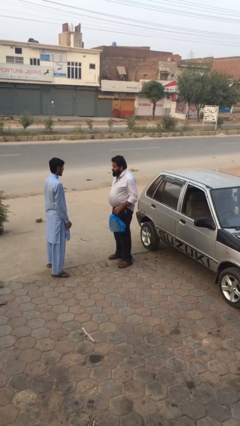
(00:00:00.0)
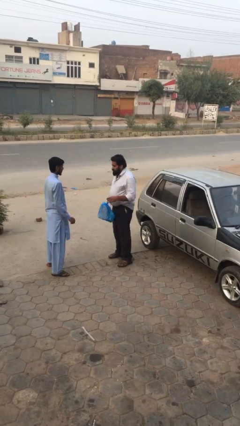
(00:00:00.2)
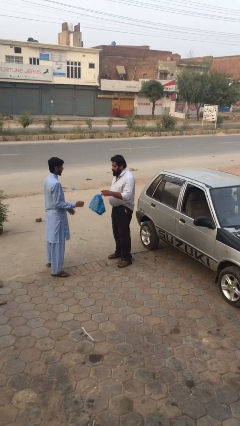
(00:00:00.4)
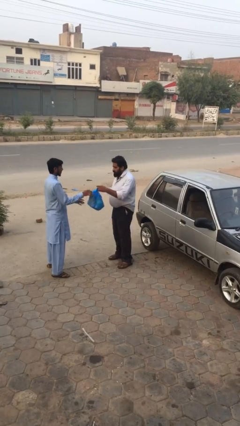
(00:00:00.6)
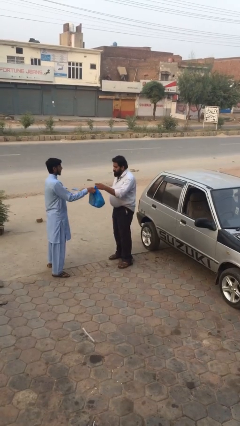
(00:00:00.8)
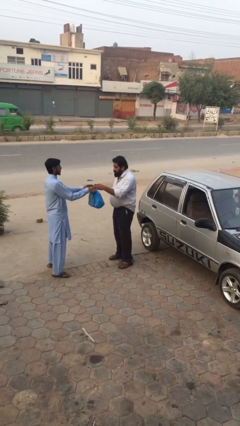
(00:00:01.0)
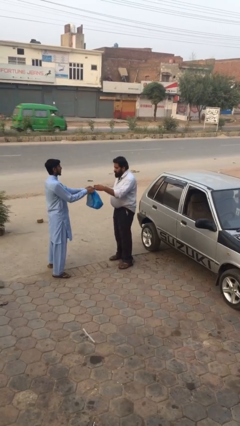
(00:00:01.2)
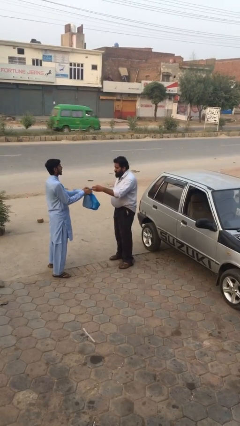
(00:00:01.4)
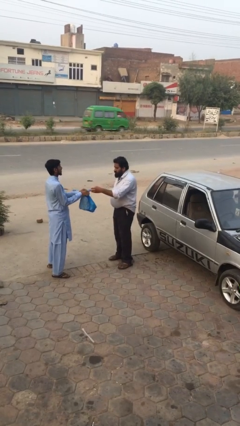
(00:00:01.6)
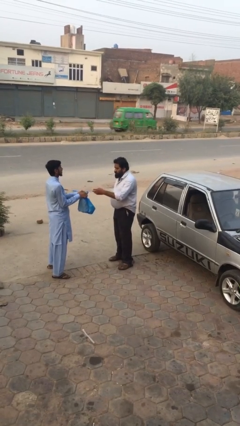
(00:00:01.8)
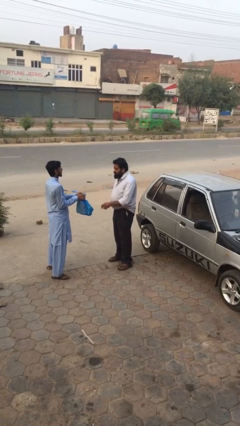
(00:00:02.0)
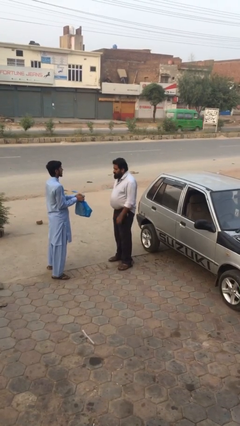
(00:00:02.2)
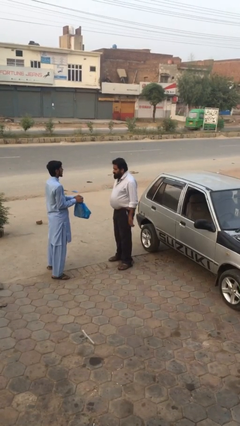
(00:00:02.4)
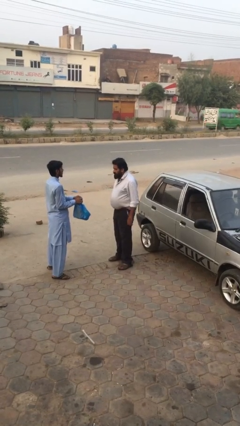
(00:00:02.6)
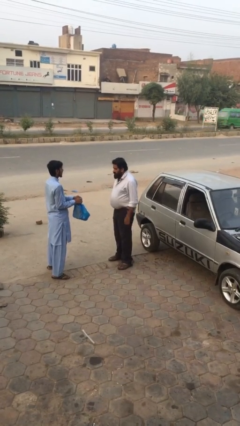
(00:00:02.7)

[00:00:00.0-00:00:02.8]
person transfers object to person

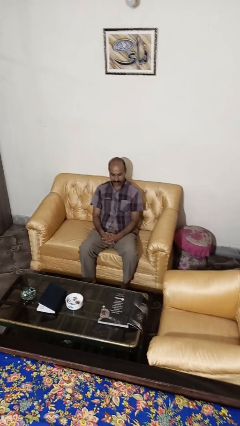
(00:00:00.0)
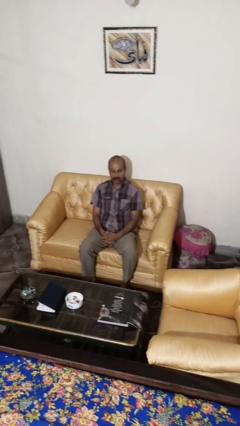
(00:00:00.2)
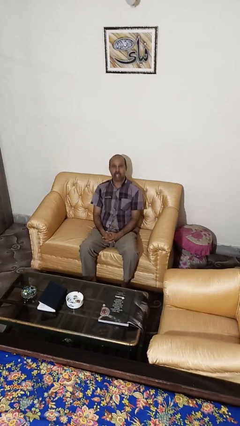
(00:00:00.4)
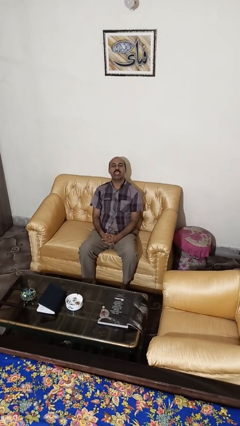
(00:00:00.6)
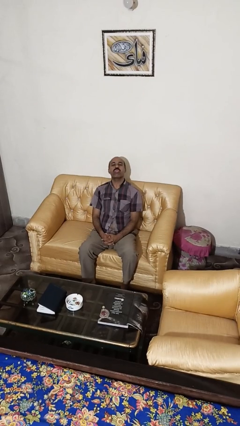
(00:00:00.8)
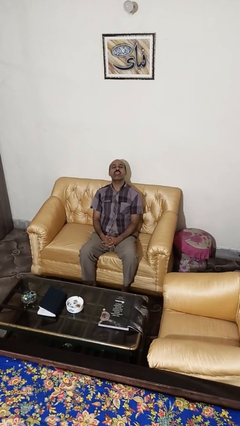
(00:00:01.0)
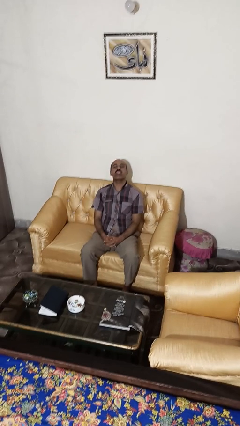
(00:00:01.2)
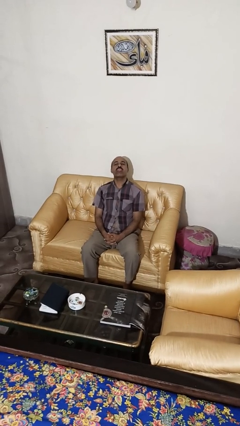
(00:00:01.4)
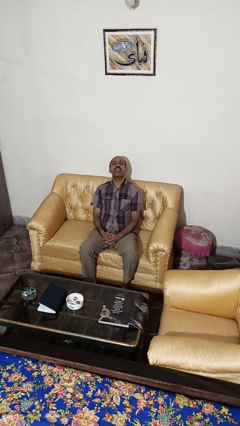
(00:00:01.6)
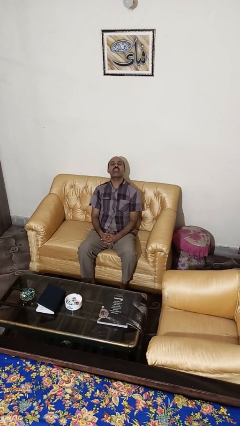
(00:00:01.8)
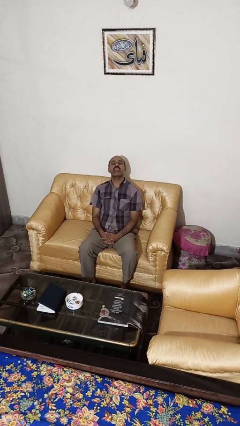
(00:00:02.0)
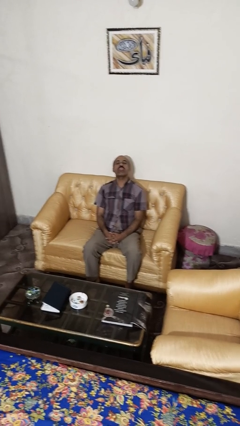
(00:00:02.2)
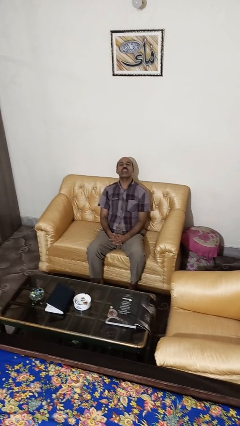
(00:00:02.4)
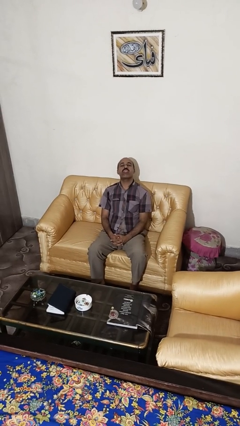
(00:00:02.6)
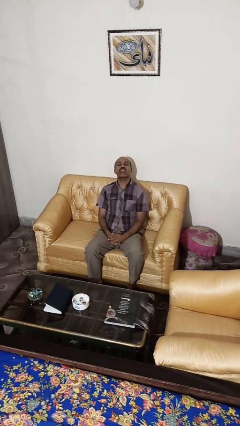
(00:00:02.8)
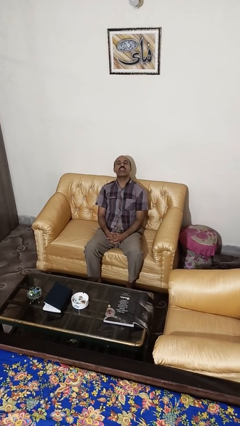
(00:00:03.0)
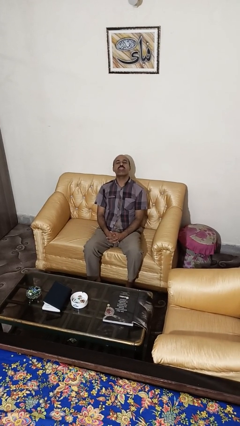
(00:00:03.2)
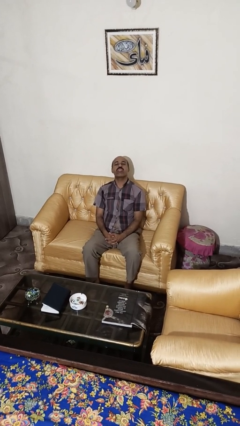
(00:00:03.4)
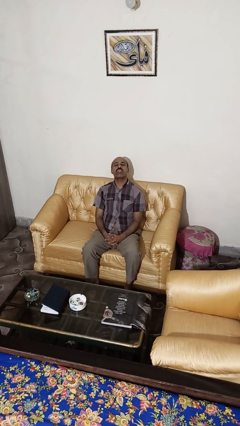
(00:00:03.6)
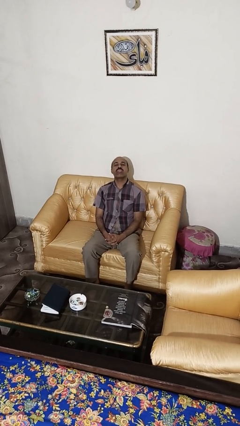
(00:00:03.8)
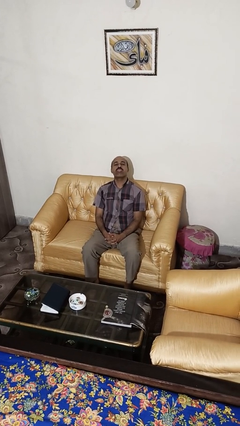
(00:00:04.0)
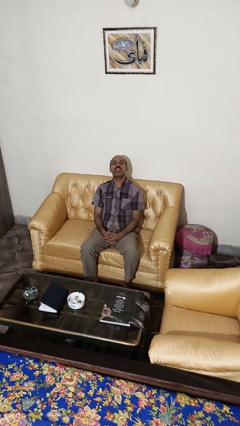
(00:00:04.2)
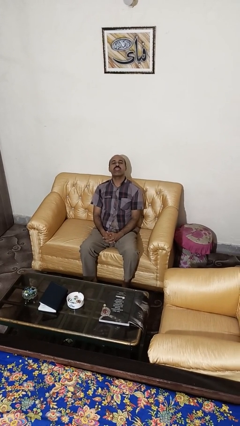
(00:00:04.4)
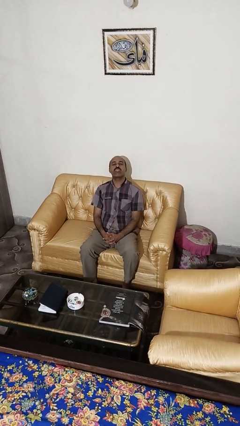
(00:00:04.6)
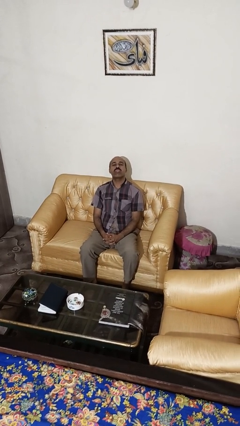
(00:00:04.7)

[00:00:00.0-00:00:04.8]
person sticks out tongue

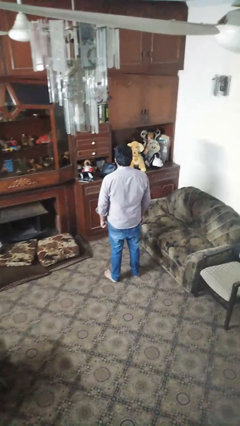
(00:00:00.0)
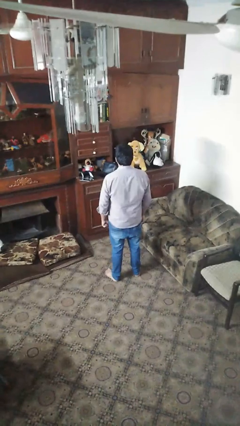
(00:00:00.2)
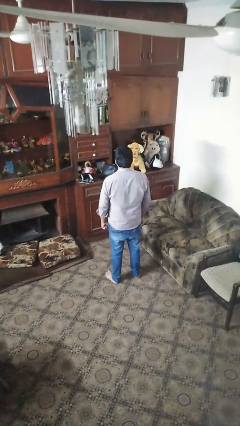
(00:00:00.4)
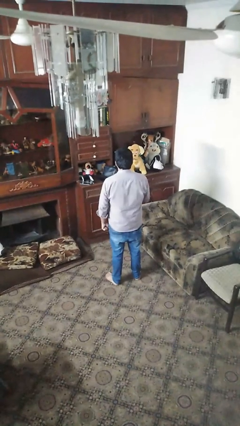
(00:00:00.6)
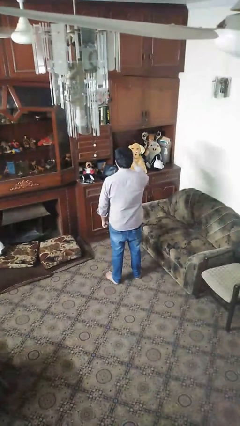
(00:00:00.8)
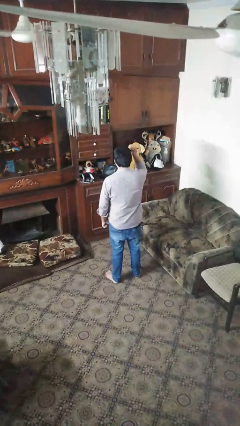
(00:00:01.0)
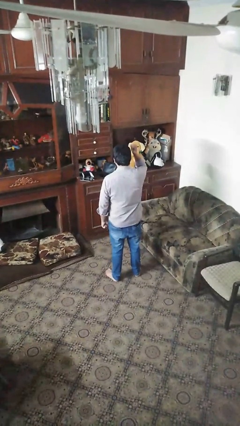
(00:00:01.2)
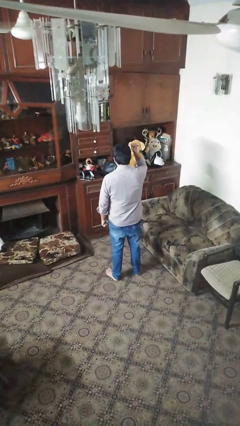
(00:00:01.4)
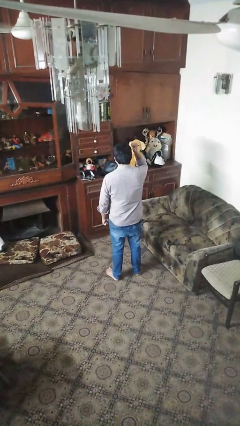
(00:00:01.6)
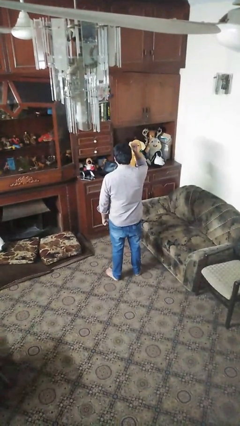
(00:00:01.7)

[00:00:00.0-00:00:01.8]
person gestures behind me

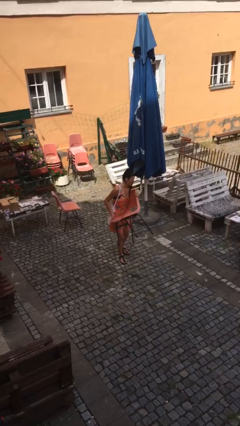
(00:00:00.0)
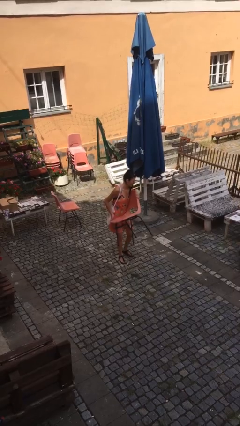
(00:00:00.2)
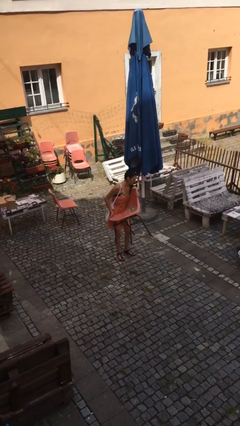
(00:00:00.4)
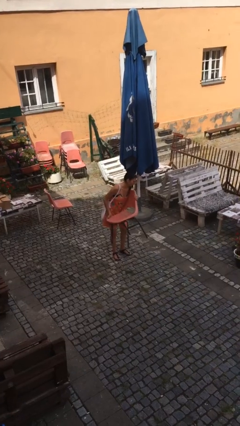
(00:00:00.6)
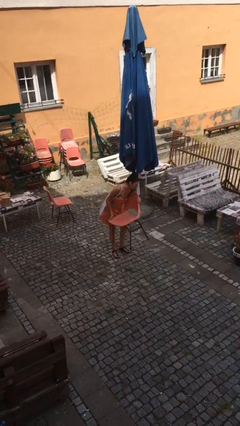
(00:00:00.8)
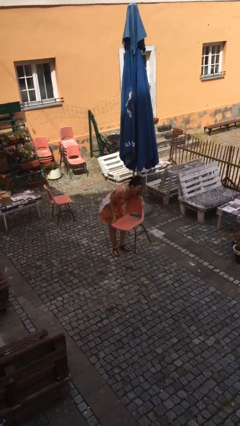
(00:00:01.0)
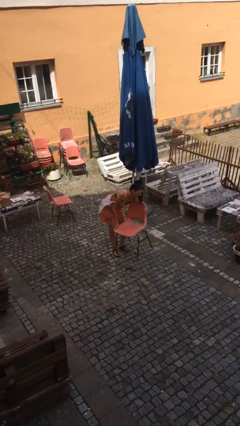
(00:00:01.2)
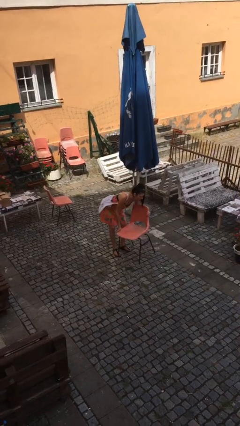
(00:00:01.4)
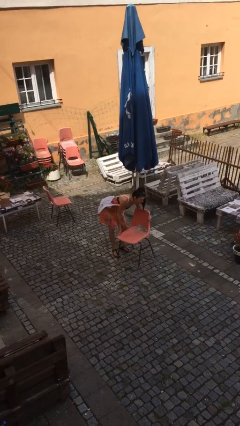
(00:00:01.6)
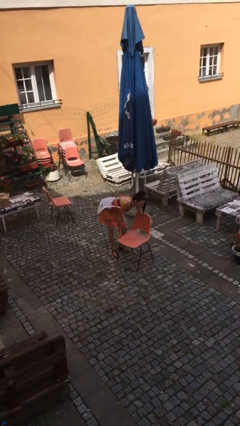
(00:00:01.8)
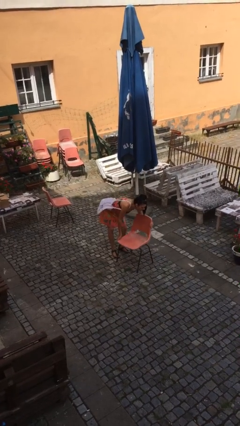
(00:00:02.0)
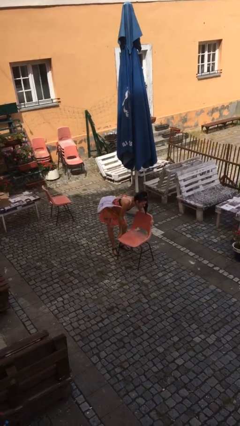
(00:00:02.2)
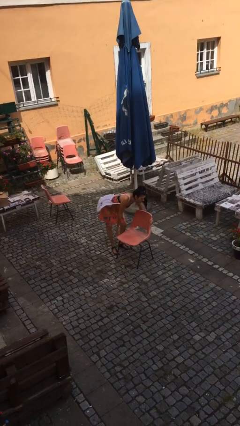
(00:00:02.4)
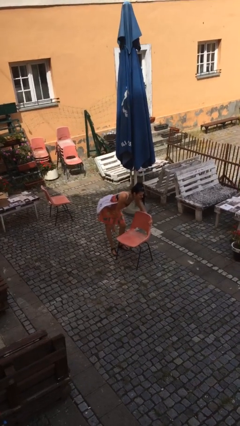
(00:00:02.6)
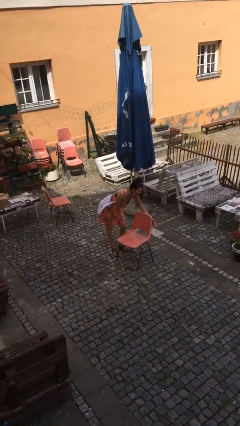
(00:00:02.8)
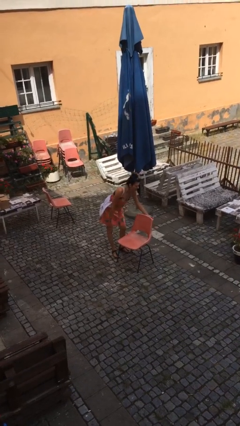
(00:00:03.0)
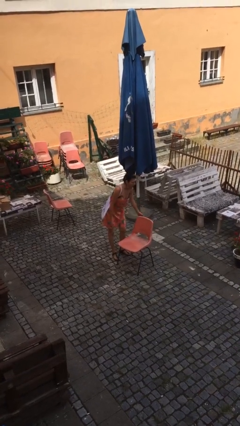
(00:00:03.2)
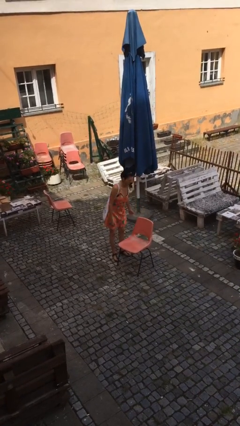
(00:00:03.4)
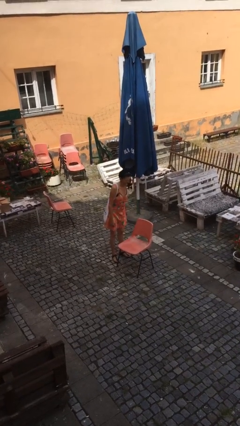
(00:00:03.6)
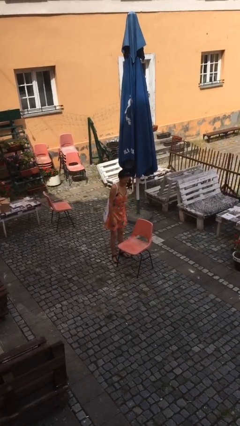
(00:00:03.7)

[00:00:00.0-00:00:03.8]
person puts down object on floor

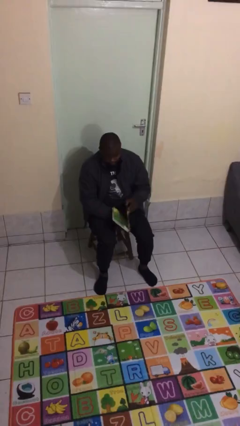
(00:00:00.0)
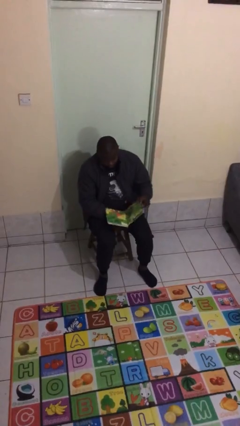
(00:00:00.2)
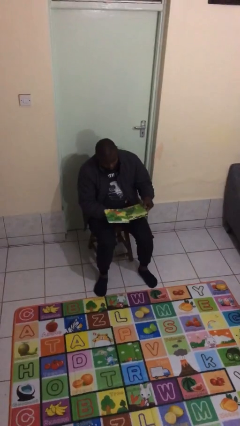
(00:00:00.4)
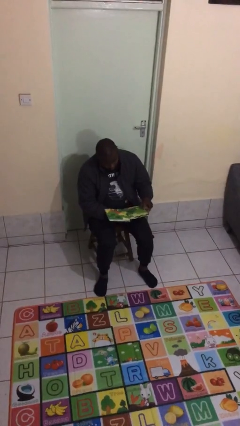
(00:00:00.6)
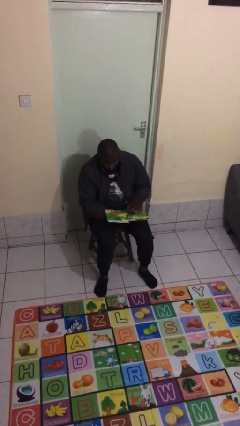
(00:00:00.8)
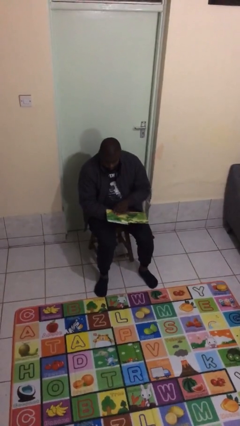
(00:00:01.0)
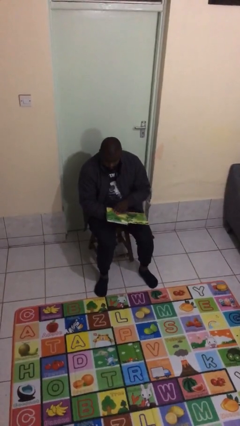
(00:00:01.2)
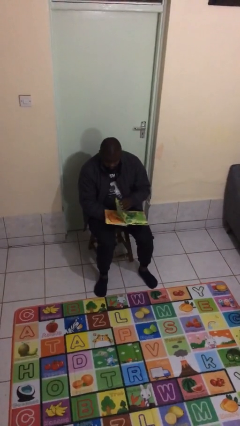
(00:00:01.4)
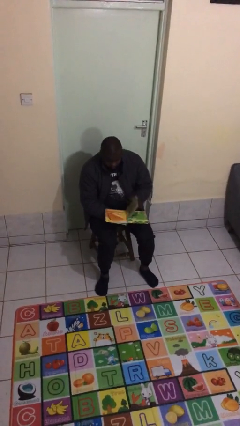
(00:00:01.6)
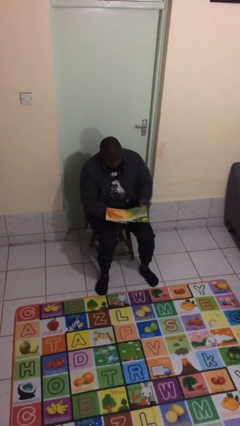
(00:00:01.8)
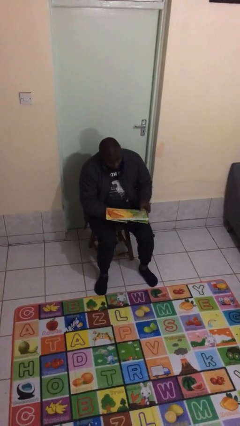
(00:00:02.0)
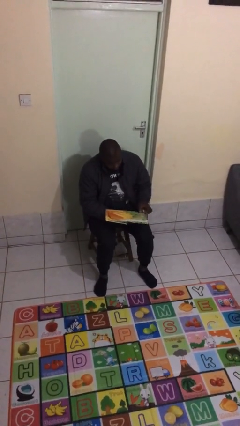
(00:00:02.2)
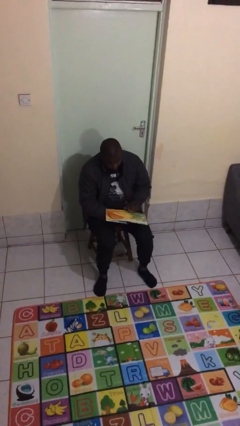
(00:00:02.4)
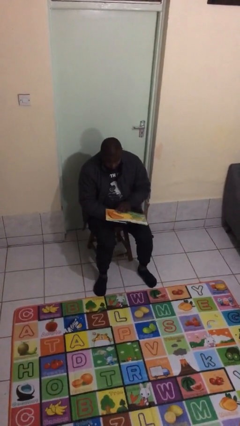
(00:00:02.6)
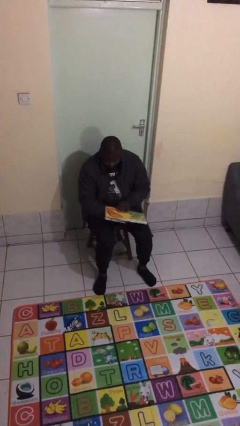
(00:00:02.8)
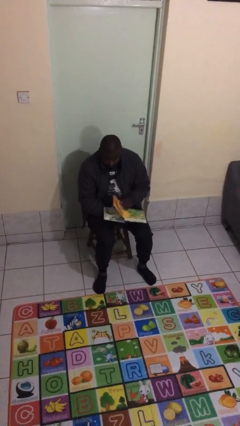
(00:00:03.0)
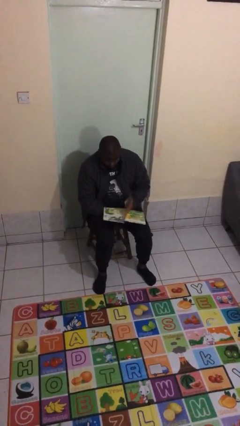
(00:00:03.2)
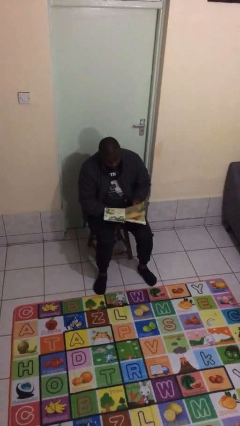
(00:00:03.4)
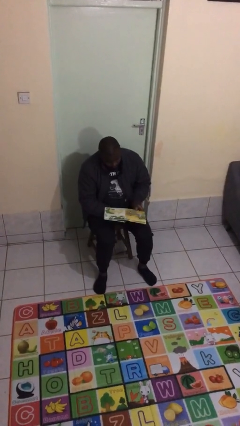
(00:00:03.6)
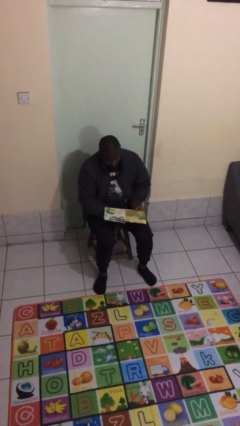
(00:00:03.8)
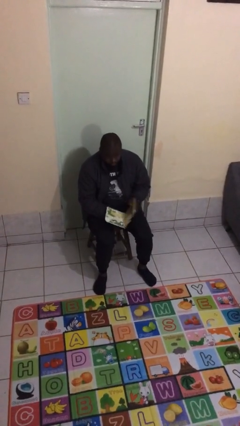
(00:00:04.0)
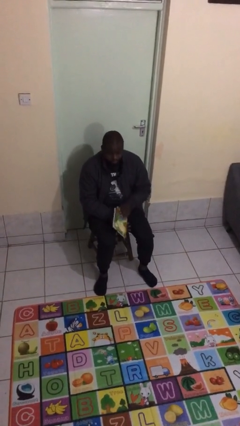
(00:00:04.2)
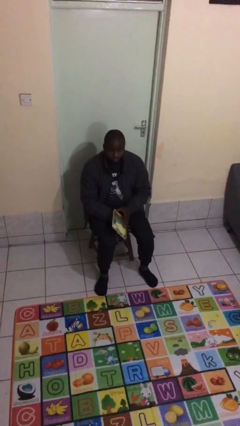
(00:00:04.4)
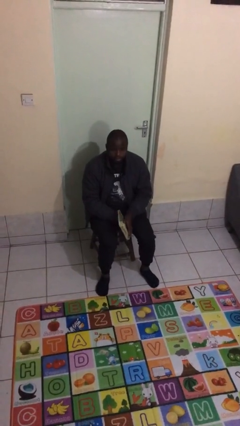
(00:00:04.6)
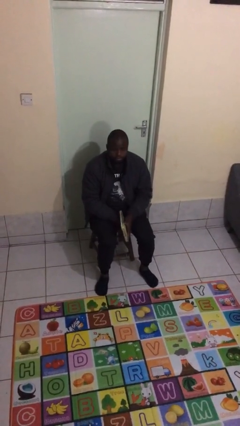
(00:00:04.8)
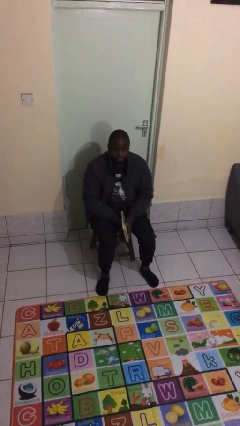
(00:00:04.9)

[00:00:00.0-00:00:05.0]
person reads book
